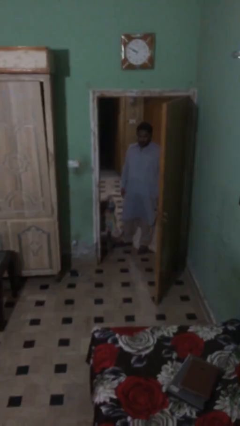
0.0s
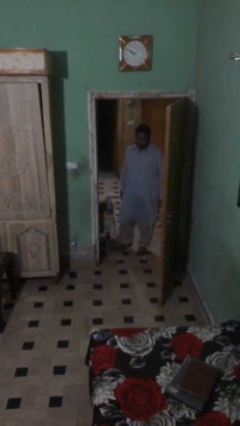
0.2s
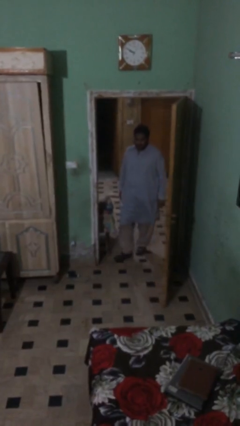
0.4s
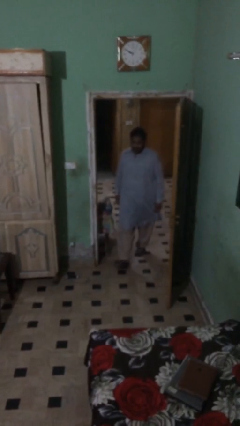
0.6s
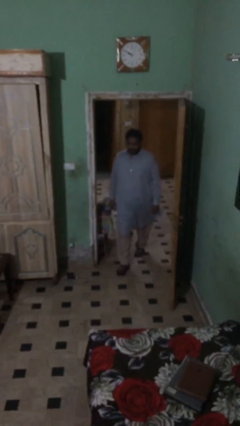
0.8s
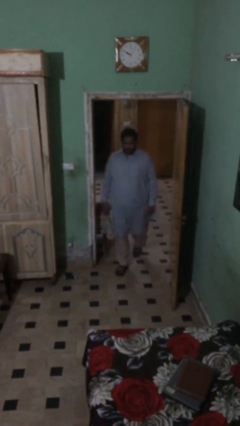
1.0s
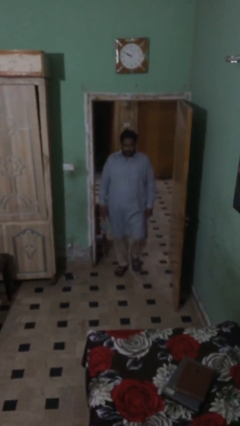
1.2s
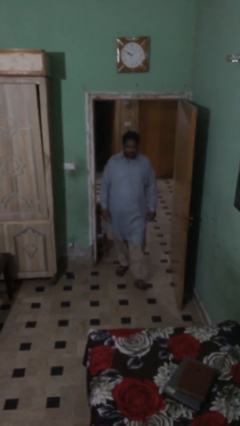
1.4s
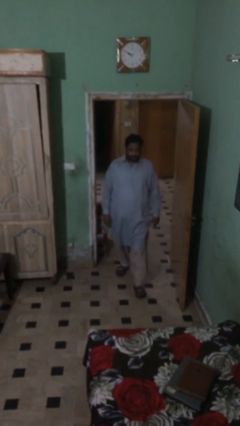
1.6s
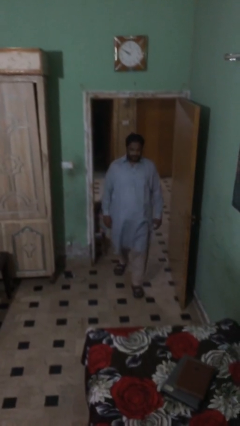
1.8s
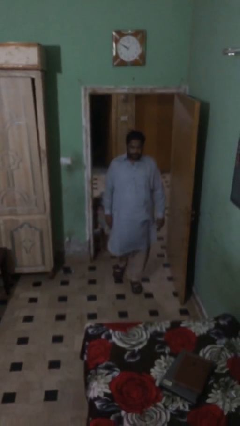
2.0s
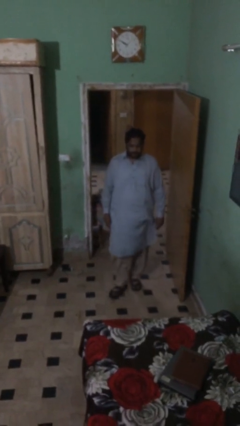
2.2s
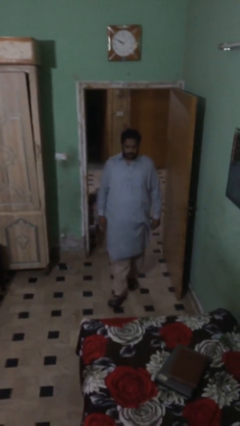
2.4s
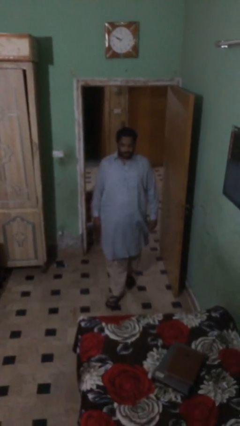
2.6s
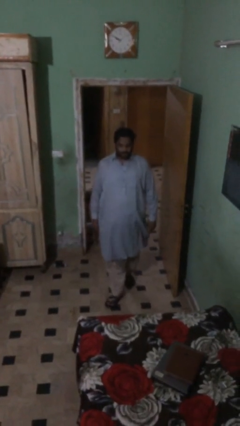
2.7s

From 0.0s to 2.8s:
person enters scene through structure

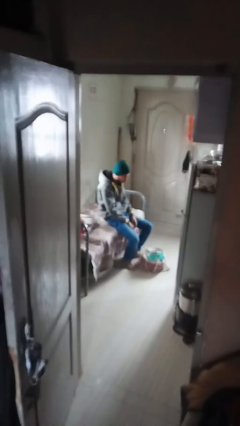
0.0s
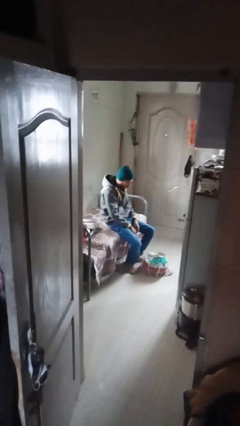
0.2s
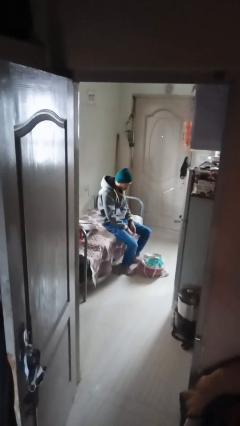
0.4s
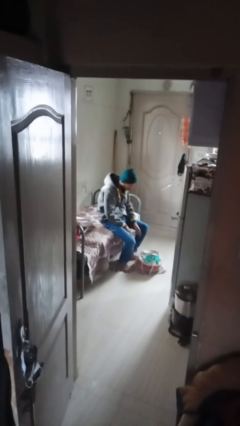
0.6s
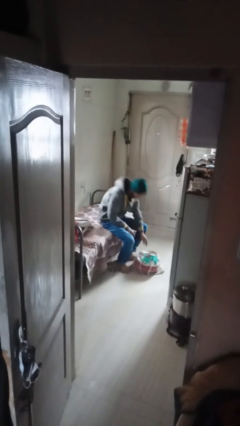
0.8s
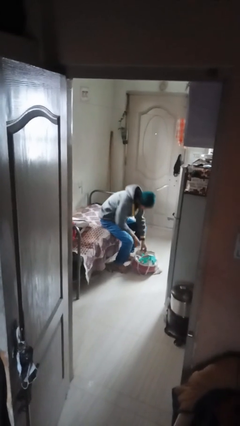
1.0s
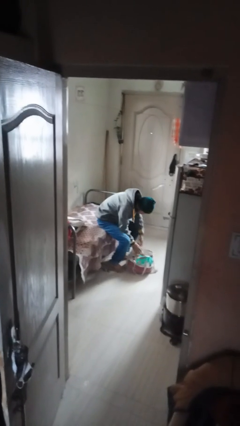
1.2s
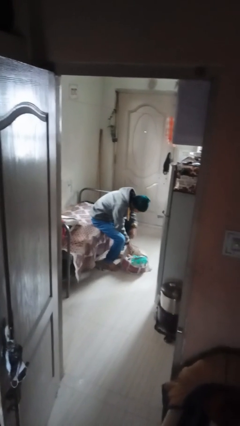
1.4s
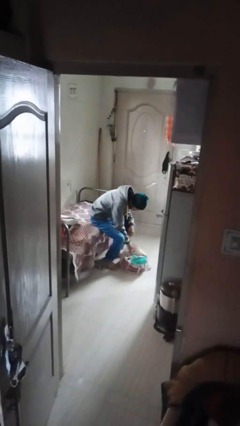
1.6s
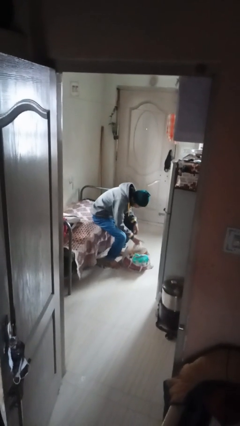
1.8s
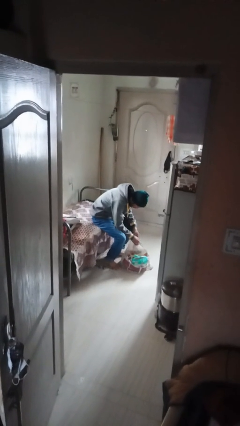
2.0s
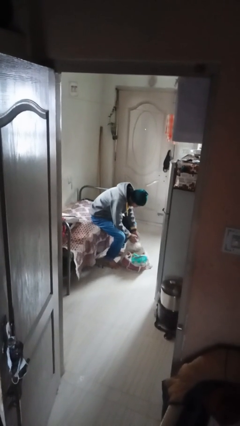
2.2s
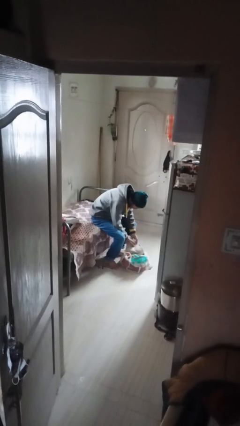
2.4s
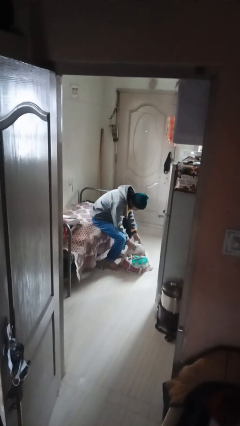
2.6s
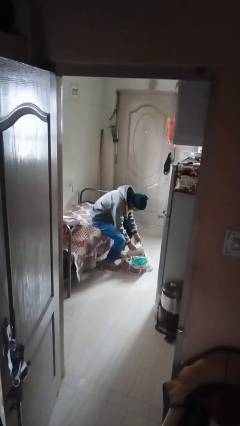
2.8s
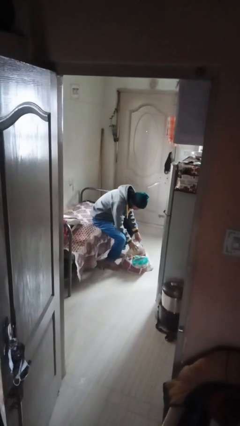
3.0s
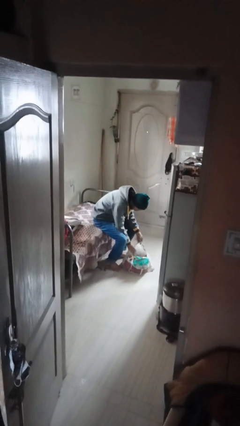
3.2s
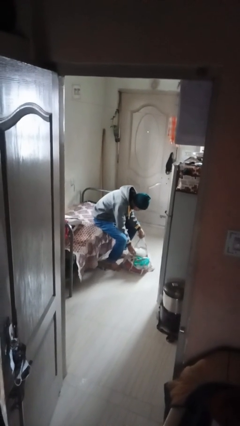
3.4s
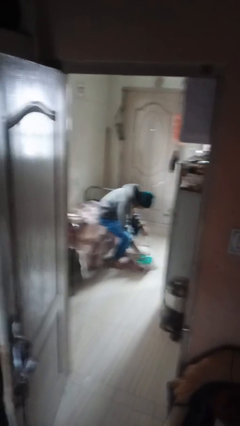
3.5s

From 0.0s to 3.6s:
person searches in bag

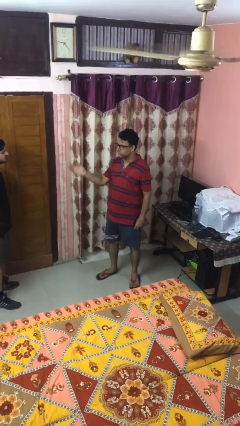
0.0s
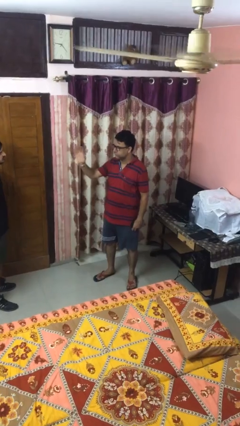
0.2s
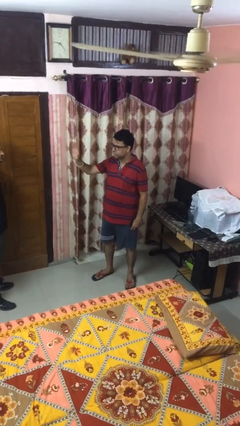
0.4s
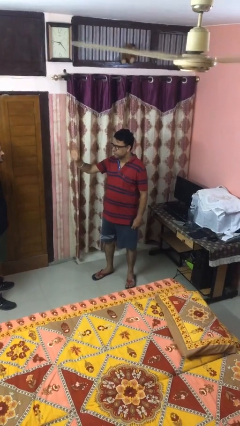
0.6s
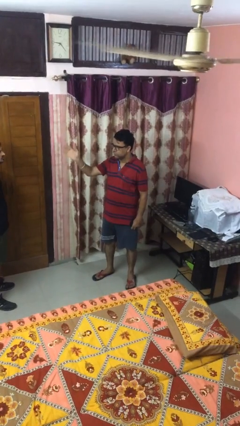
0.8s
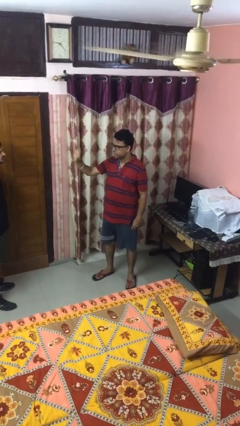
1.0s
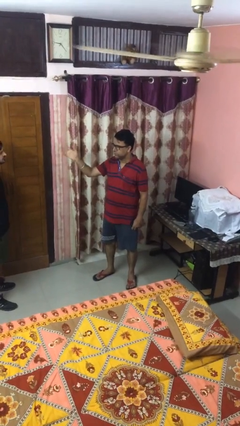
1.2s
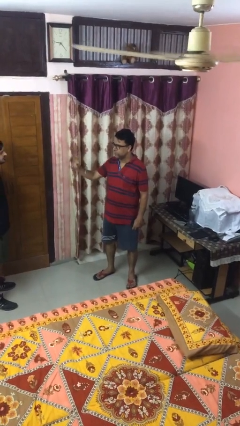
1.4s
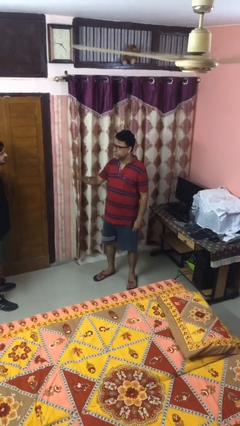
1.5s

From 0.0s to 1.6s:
person waves at person

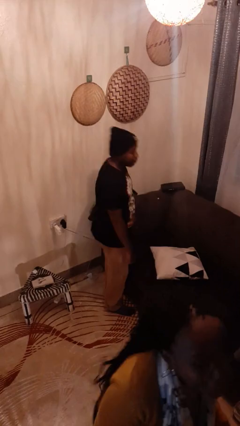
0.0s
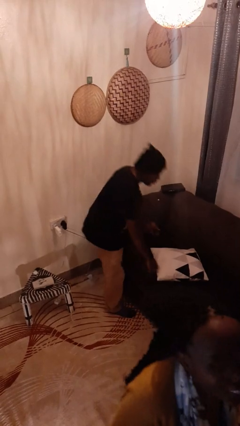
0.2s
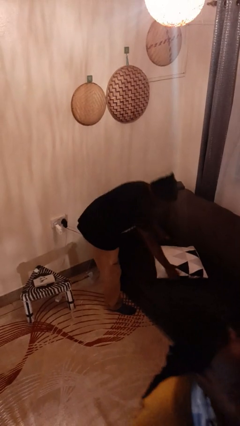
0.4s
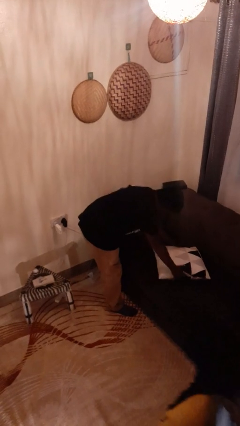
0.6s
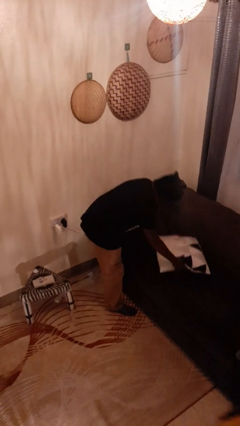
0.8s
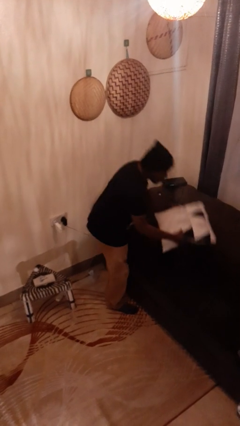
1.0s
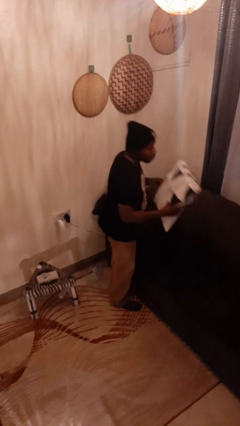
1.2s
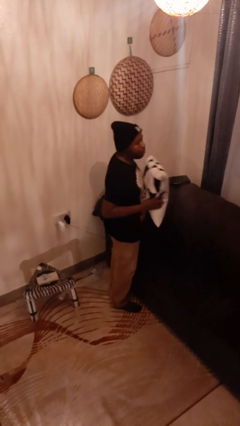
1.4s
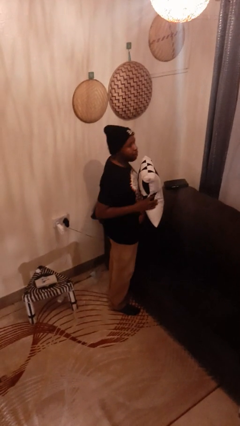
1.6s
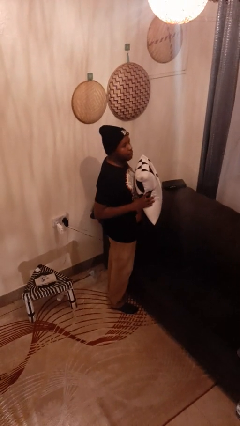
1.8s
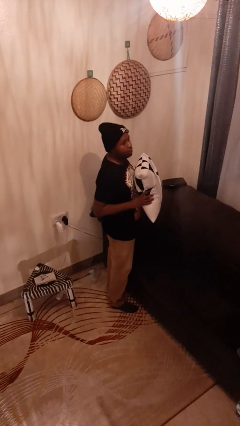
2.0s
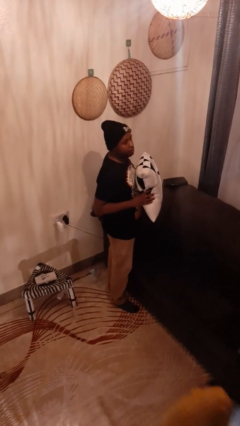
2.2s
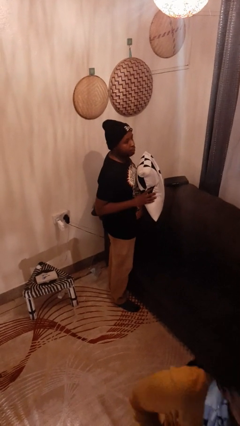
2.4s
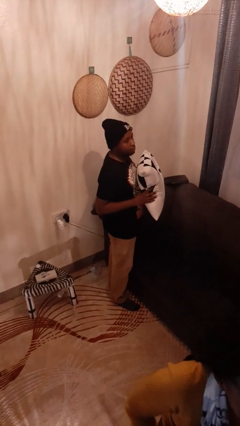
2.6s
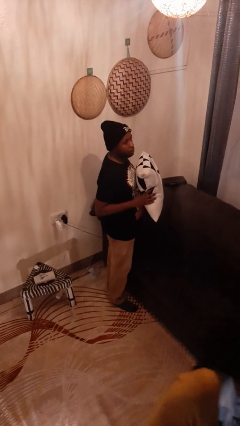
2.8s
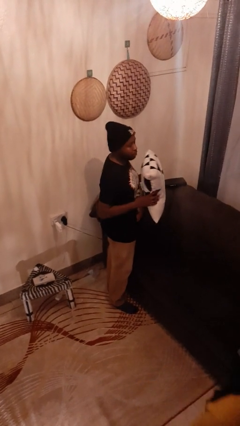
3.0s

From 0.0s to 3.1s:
person picks up object from couch

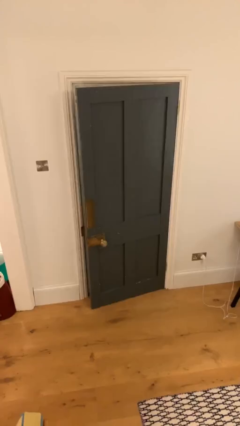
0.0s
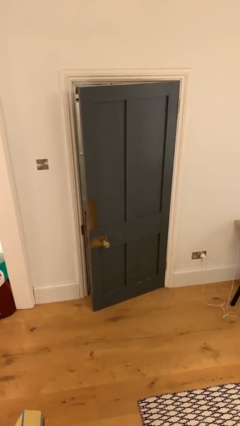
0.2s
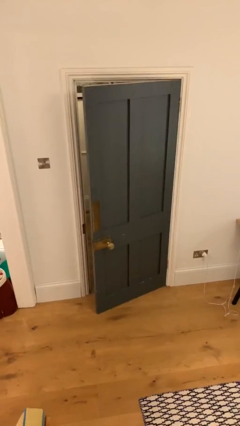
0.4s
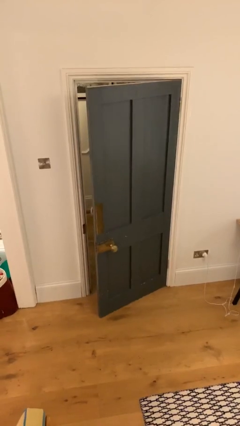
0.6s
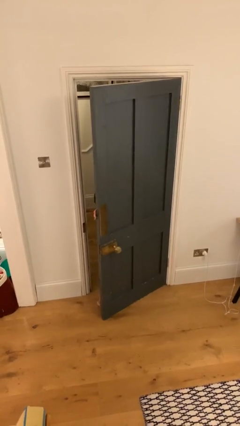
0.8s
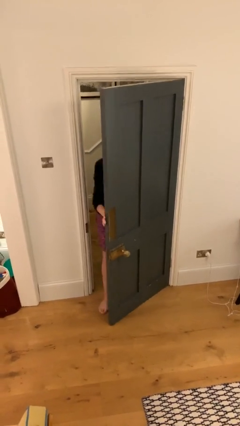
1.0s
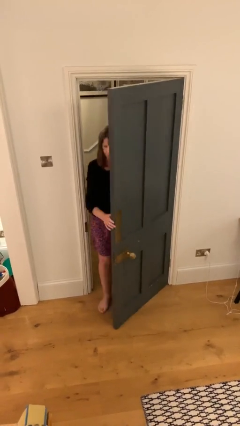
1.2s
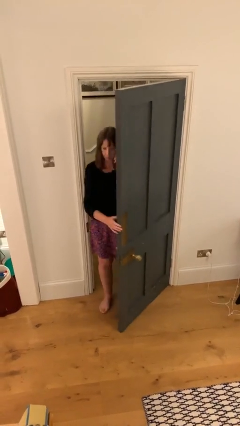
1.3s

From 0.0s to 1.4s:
person opens facility door

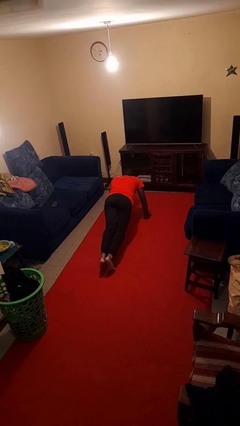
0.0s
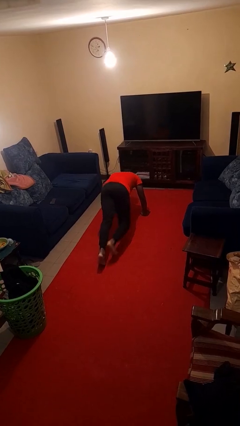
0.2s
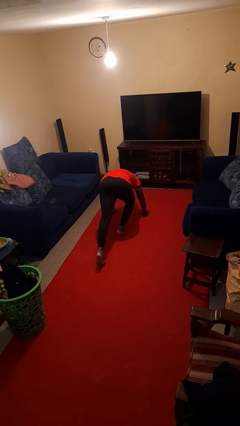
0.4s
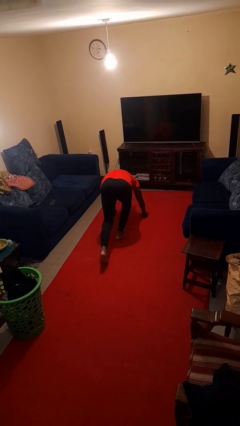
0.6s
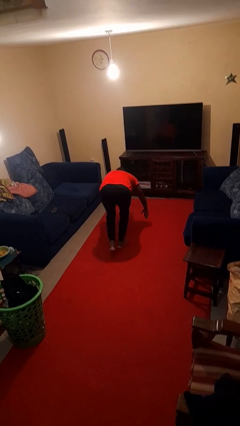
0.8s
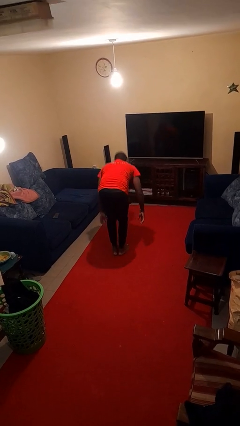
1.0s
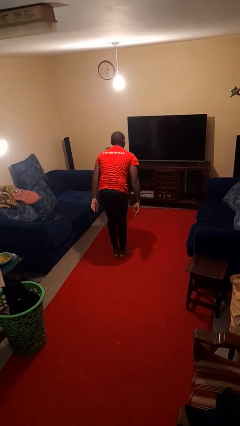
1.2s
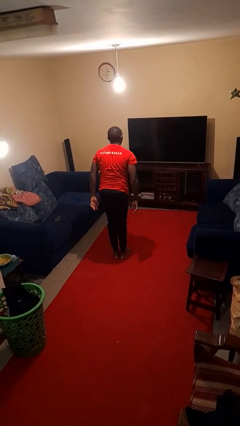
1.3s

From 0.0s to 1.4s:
person stands up from floor

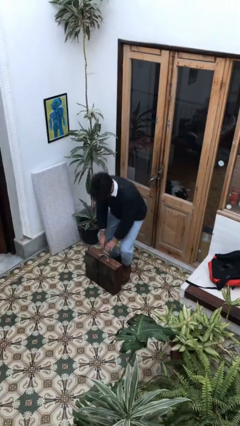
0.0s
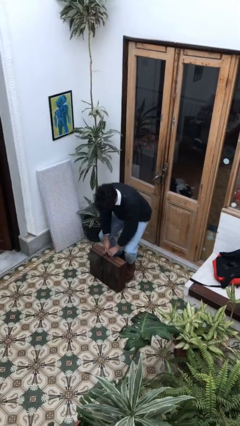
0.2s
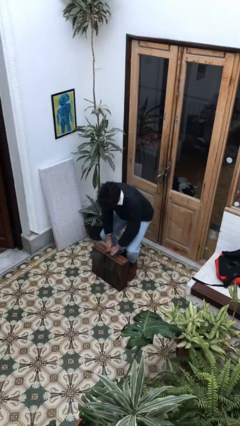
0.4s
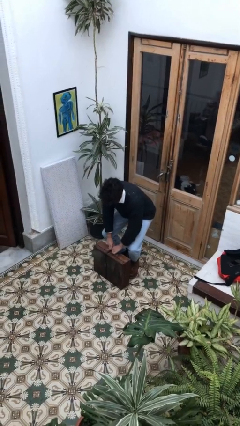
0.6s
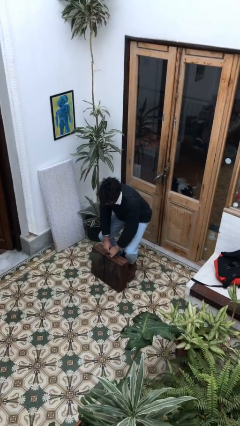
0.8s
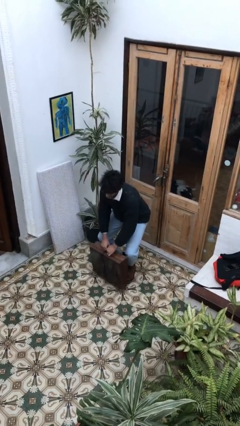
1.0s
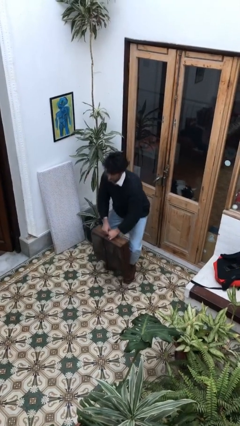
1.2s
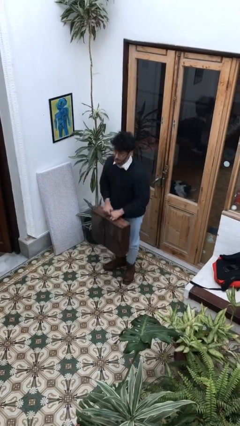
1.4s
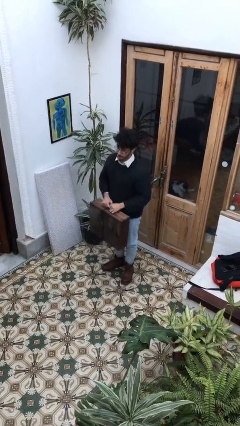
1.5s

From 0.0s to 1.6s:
person picks up object from floor

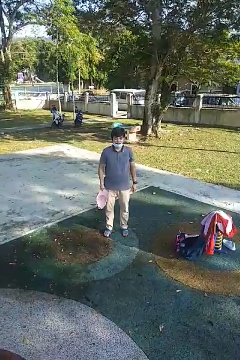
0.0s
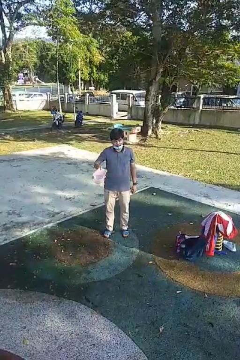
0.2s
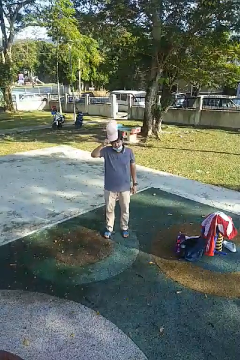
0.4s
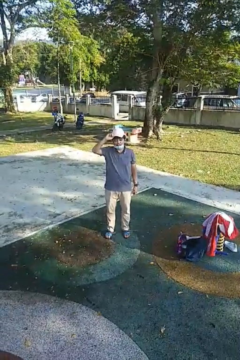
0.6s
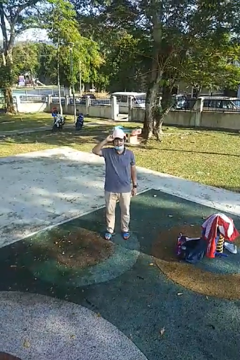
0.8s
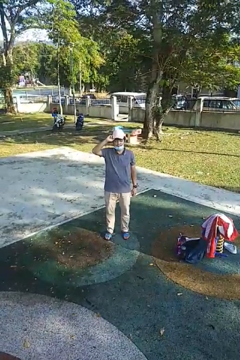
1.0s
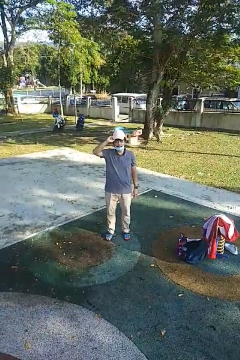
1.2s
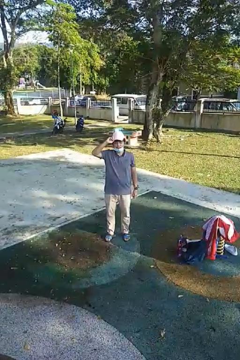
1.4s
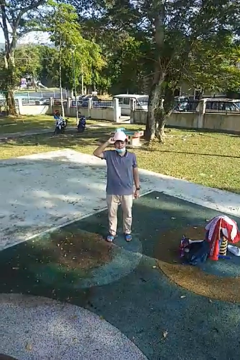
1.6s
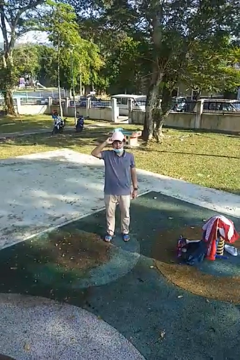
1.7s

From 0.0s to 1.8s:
person puts on hat
